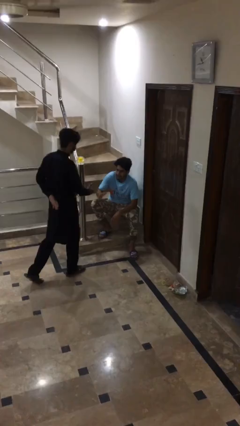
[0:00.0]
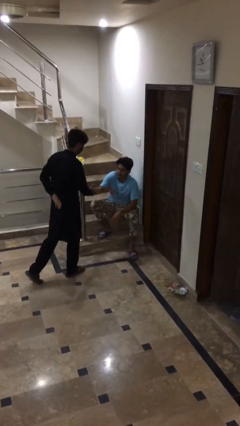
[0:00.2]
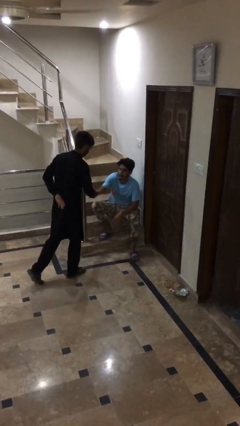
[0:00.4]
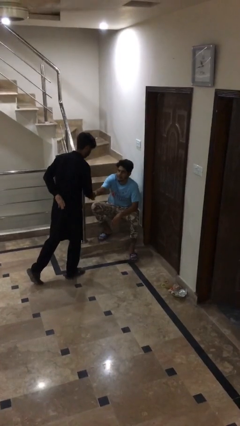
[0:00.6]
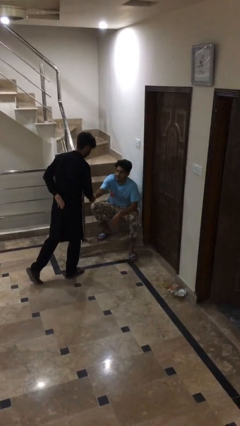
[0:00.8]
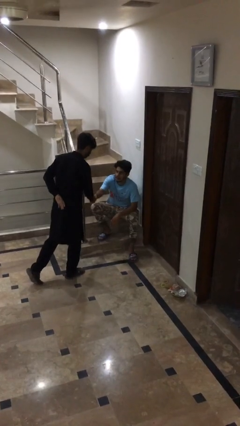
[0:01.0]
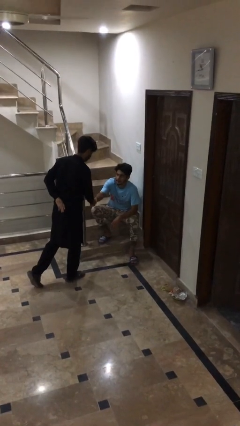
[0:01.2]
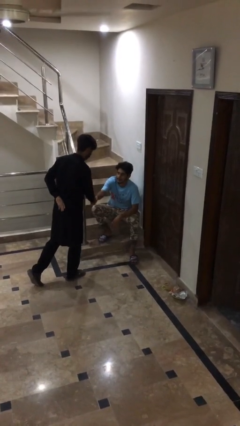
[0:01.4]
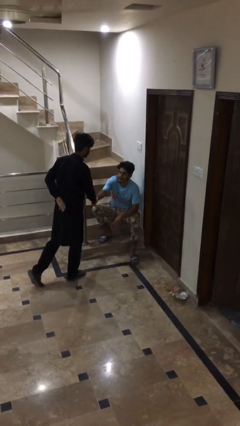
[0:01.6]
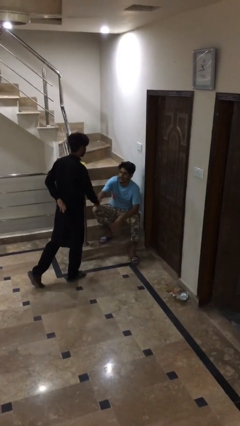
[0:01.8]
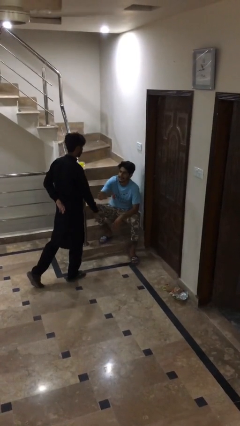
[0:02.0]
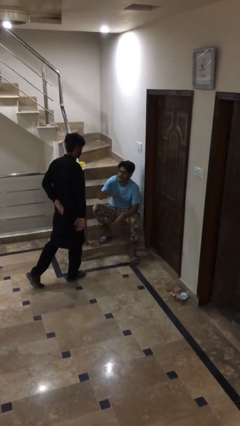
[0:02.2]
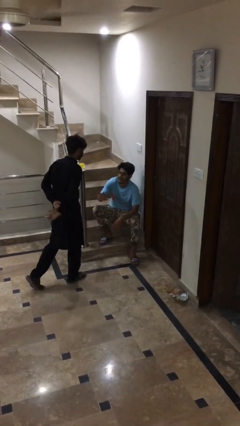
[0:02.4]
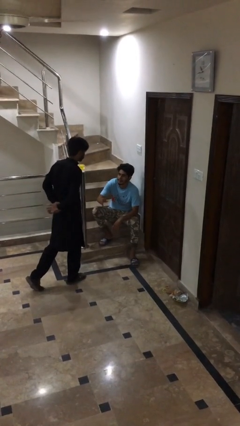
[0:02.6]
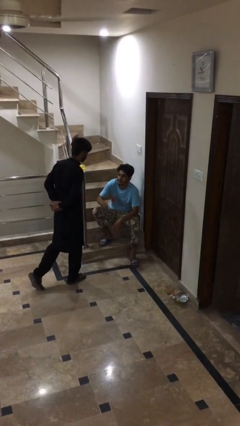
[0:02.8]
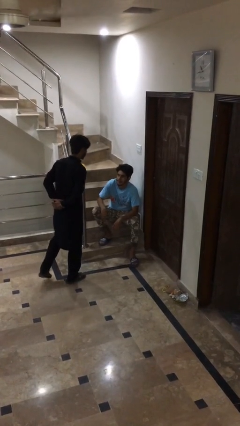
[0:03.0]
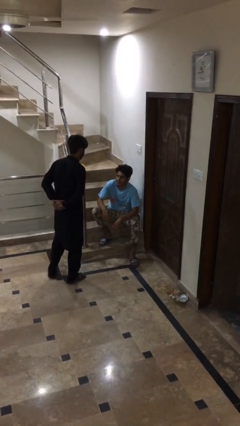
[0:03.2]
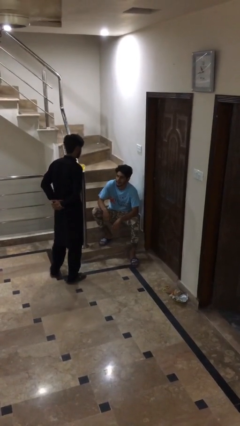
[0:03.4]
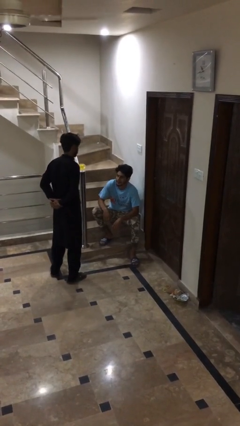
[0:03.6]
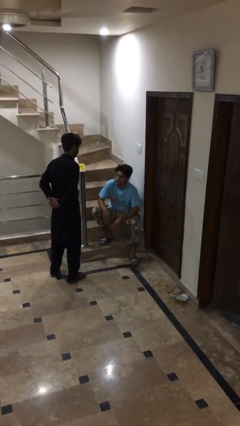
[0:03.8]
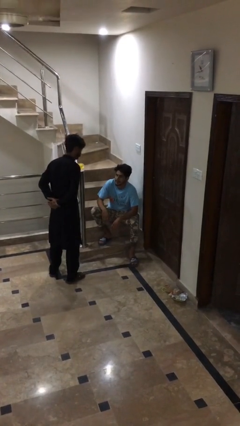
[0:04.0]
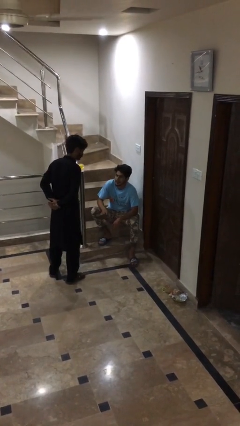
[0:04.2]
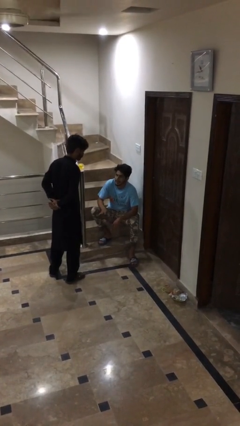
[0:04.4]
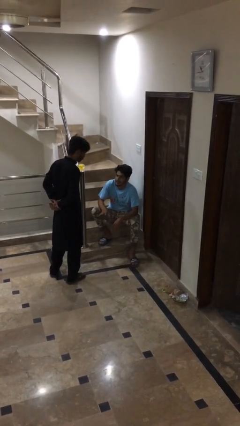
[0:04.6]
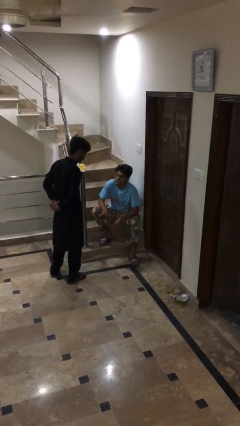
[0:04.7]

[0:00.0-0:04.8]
person shakes hand

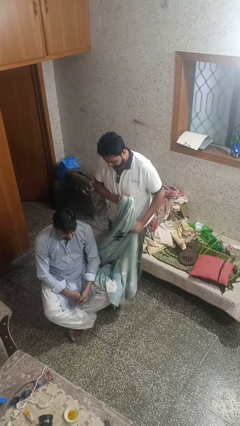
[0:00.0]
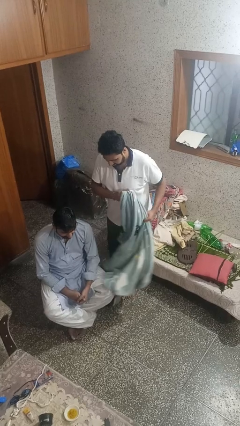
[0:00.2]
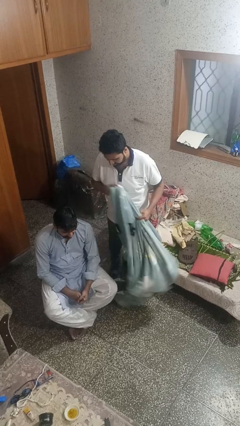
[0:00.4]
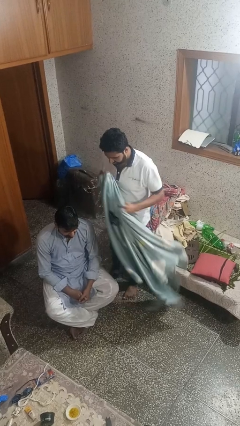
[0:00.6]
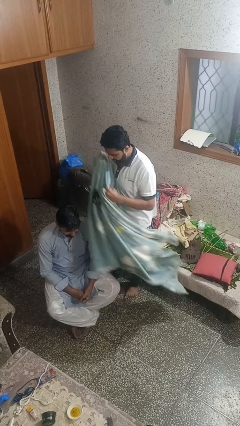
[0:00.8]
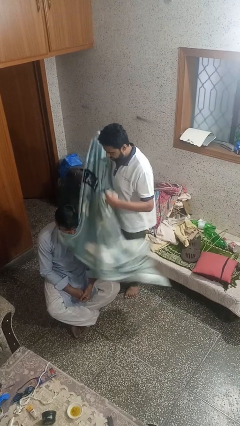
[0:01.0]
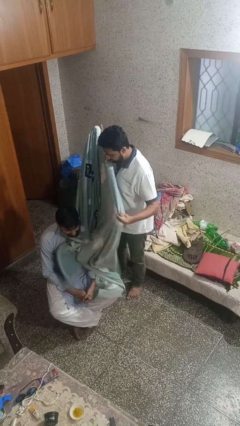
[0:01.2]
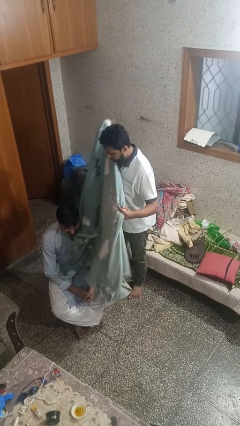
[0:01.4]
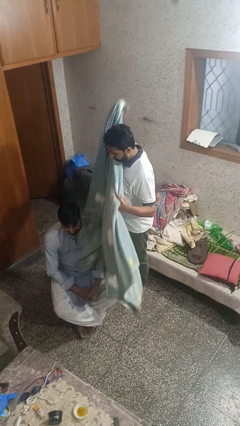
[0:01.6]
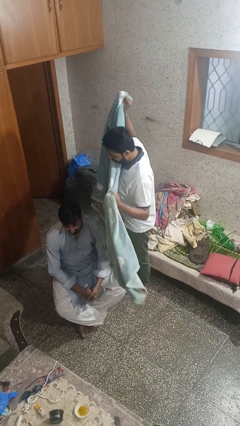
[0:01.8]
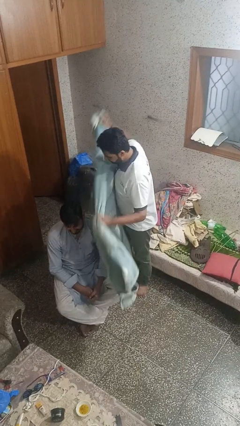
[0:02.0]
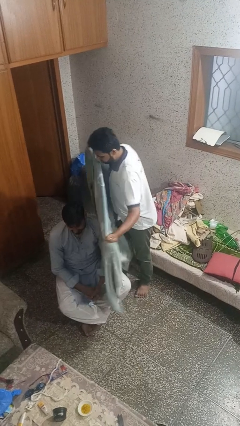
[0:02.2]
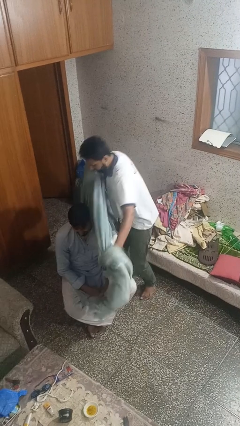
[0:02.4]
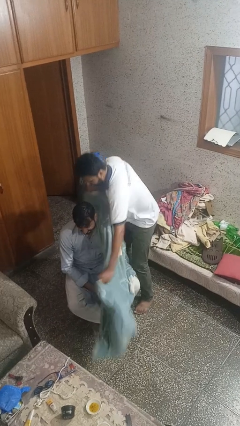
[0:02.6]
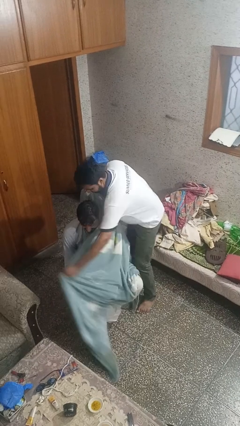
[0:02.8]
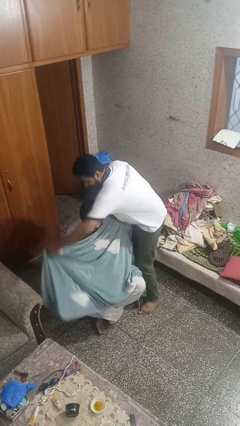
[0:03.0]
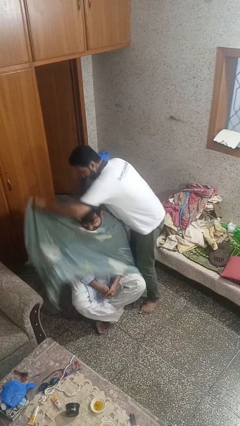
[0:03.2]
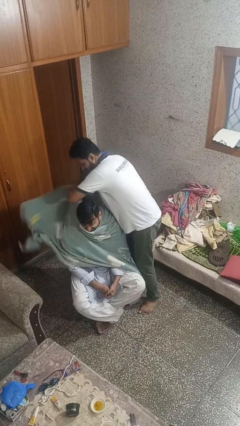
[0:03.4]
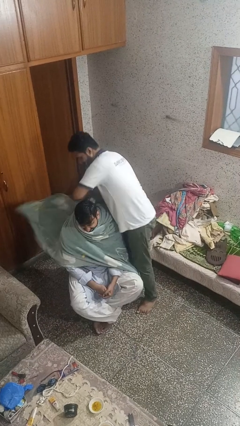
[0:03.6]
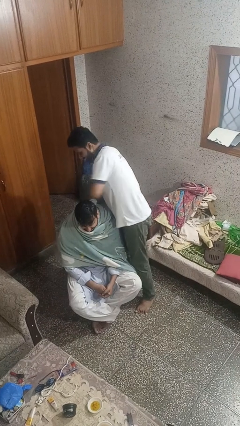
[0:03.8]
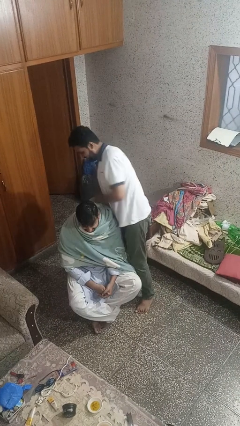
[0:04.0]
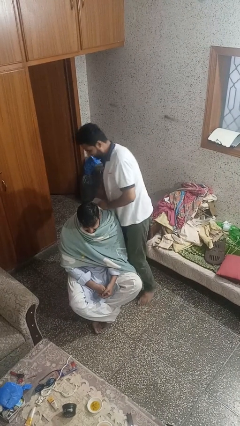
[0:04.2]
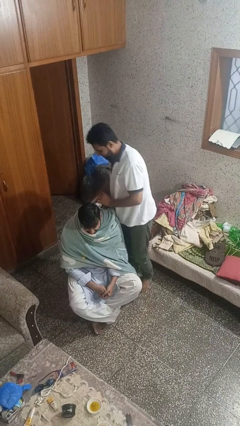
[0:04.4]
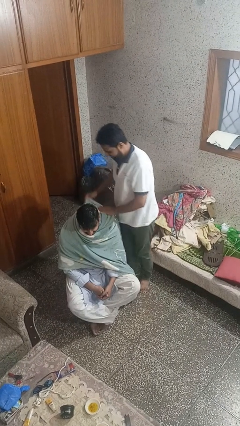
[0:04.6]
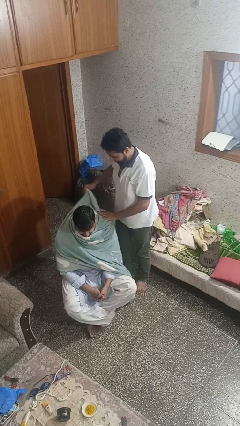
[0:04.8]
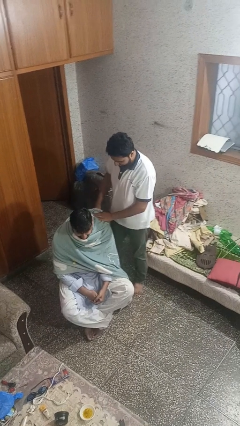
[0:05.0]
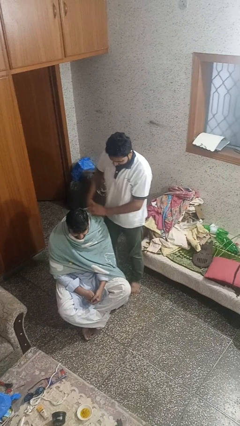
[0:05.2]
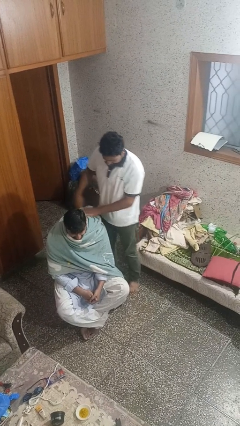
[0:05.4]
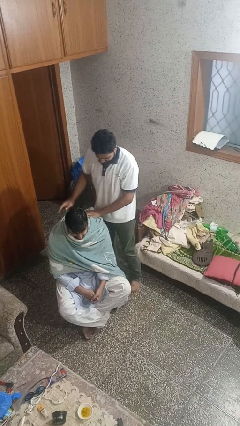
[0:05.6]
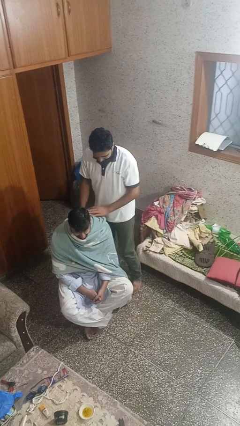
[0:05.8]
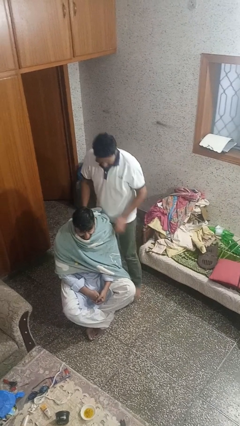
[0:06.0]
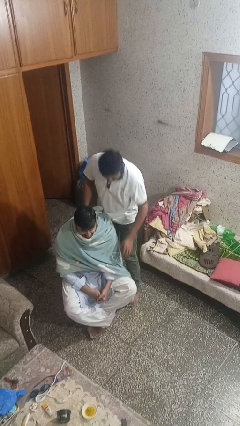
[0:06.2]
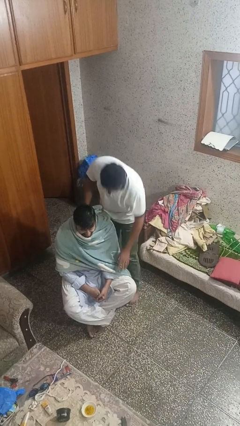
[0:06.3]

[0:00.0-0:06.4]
person covers friend with blanket

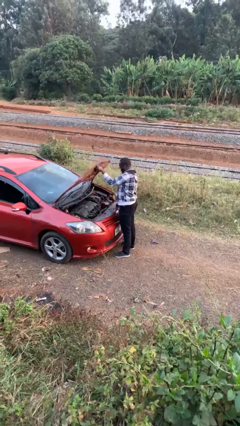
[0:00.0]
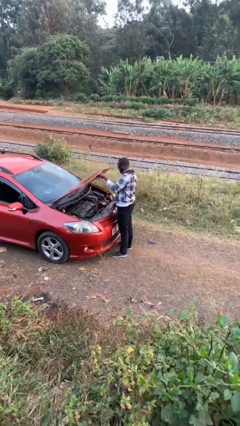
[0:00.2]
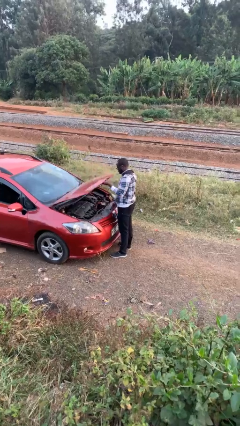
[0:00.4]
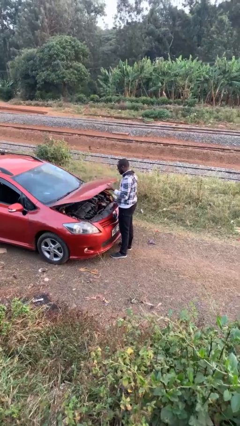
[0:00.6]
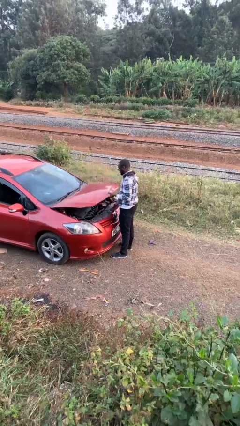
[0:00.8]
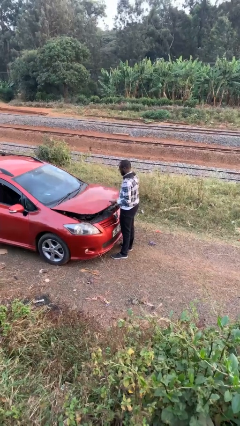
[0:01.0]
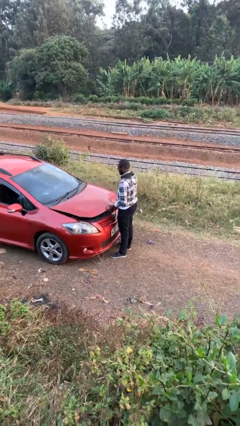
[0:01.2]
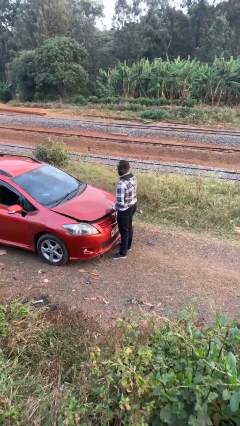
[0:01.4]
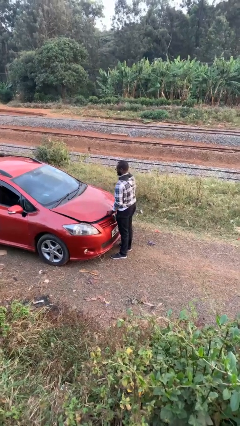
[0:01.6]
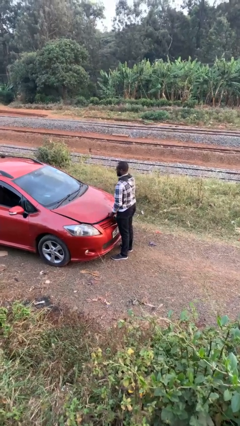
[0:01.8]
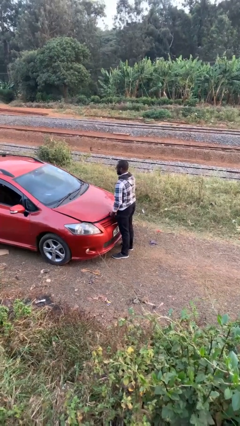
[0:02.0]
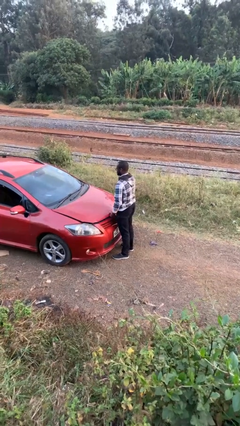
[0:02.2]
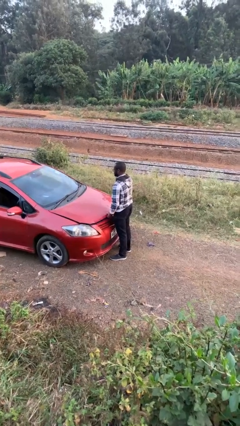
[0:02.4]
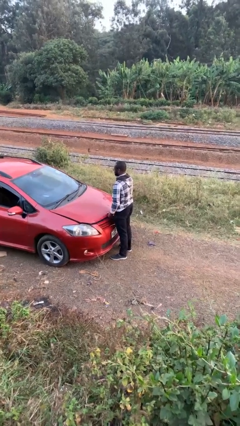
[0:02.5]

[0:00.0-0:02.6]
person closes car hood

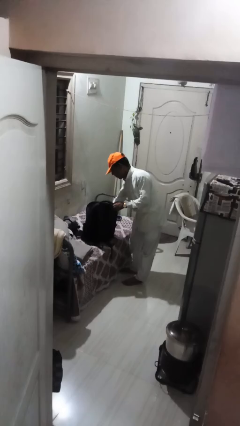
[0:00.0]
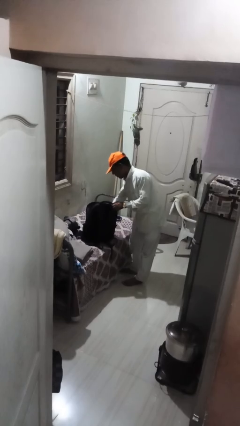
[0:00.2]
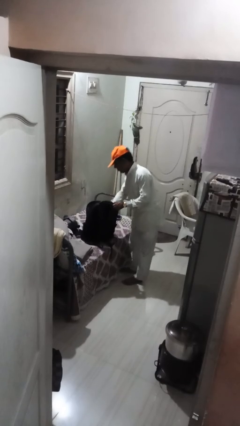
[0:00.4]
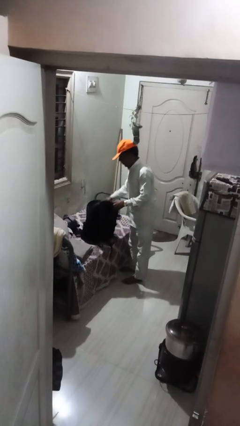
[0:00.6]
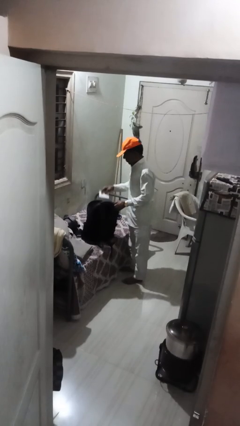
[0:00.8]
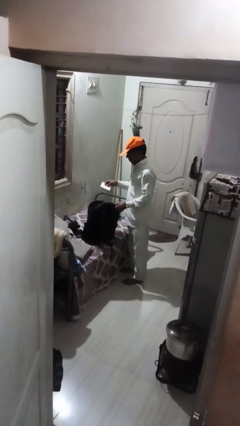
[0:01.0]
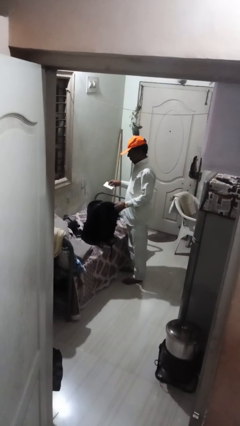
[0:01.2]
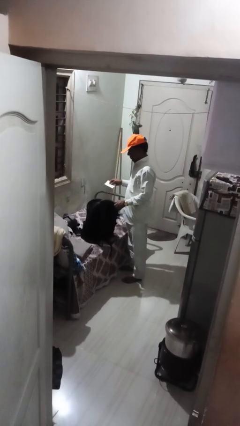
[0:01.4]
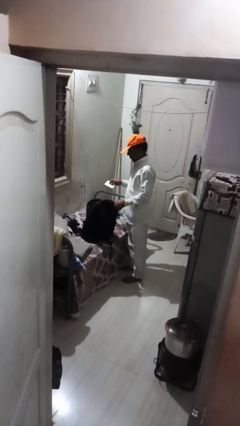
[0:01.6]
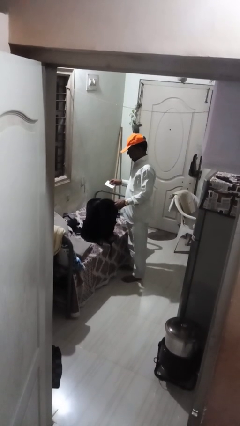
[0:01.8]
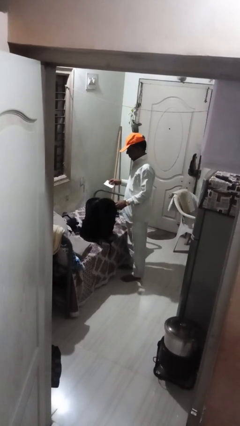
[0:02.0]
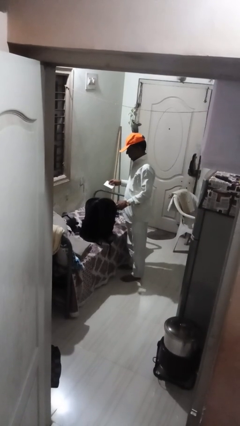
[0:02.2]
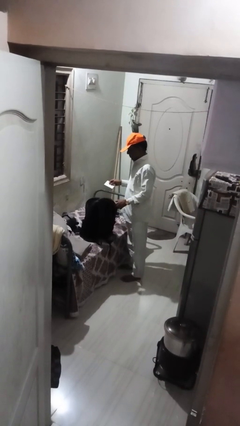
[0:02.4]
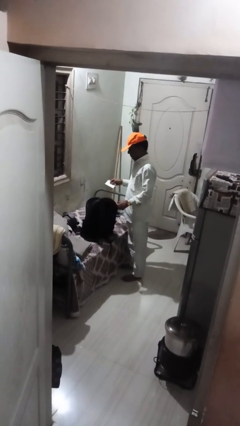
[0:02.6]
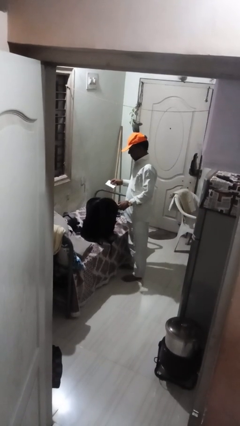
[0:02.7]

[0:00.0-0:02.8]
person takes object from backpack

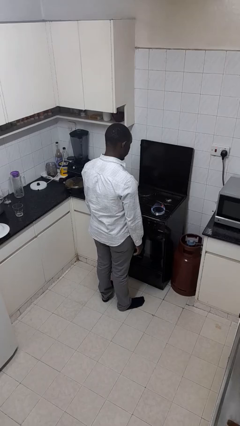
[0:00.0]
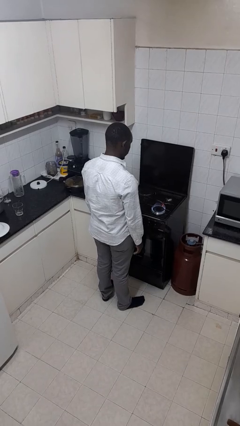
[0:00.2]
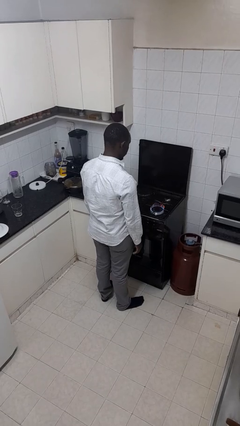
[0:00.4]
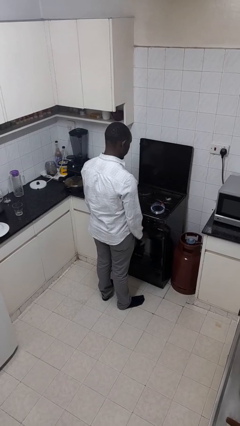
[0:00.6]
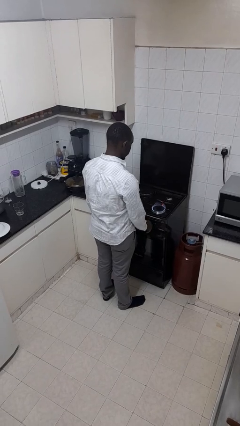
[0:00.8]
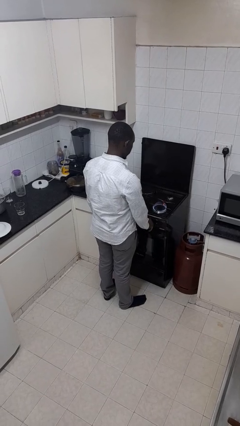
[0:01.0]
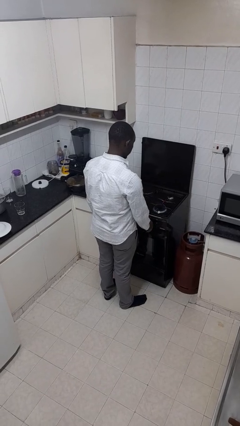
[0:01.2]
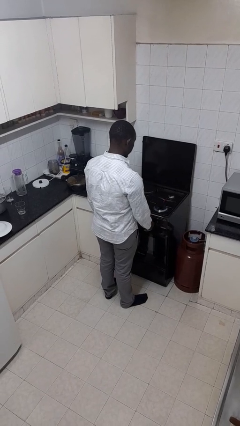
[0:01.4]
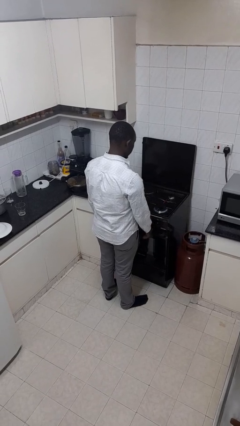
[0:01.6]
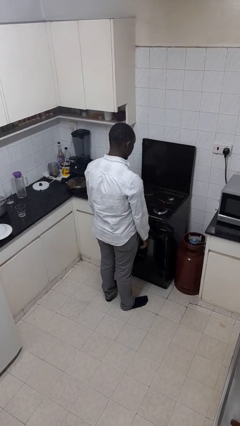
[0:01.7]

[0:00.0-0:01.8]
person turns off stovetop
